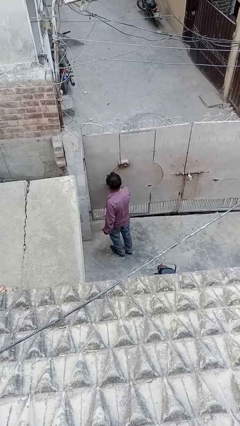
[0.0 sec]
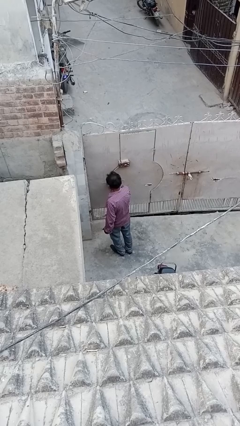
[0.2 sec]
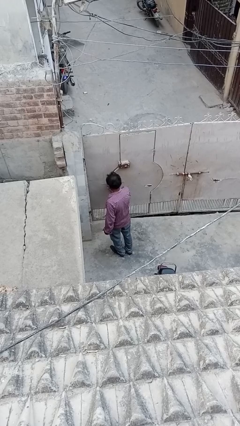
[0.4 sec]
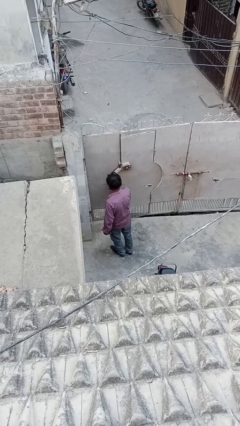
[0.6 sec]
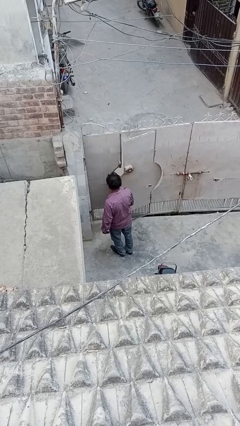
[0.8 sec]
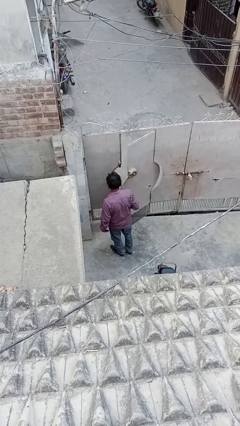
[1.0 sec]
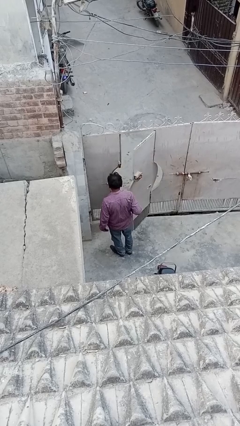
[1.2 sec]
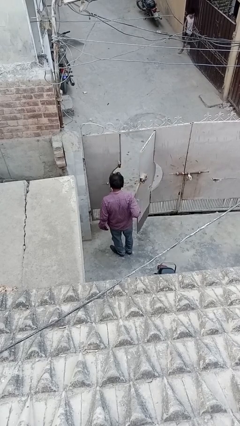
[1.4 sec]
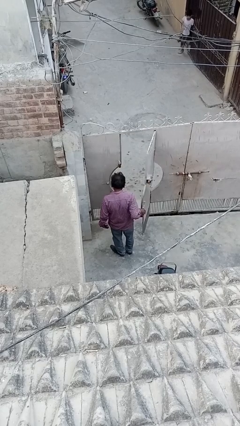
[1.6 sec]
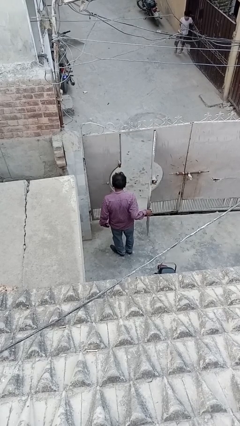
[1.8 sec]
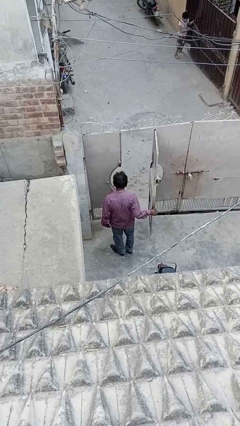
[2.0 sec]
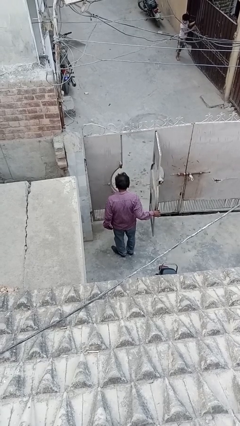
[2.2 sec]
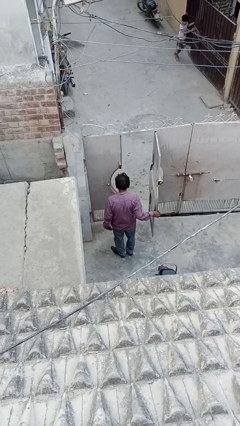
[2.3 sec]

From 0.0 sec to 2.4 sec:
person opens facility door

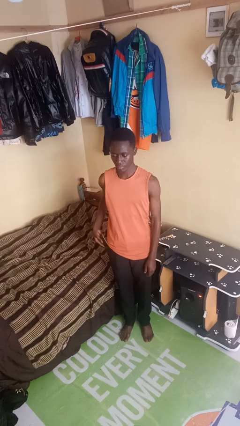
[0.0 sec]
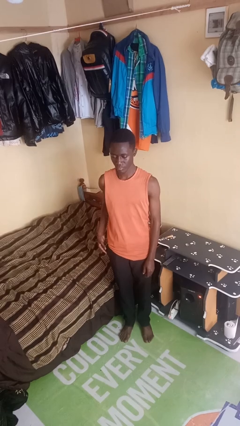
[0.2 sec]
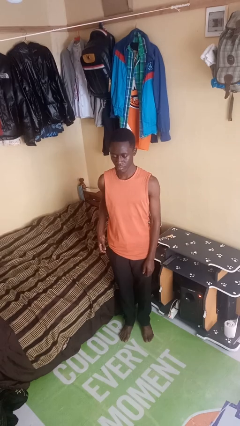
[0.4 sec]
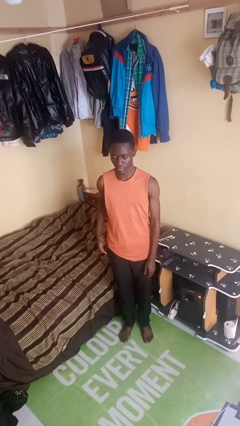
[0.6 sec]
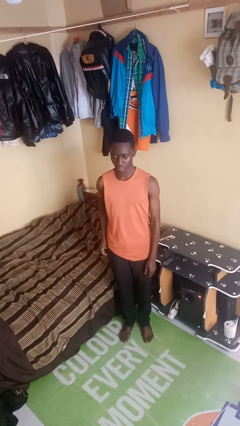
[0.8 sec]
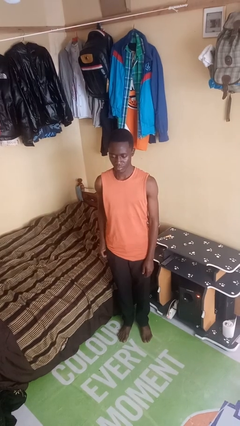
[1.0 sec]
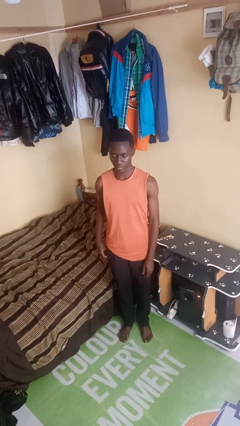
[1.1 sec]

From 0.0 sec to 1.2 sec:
person puts phone into pocket

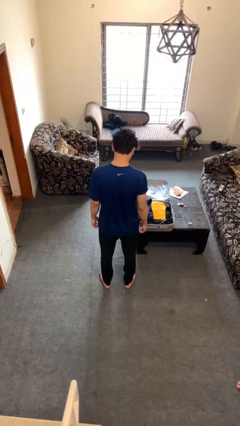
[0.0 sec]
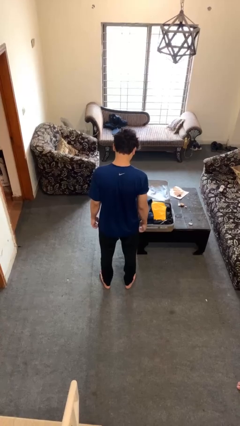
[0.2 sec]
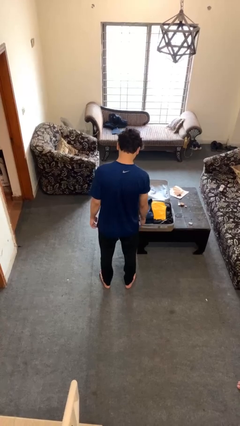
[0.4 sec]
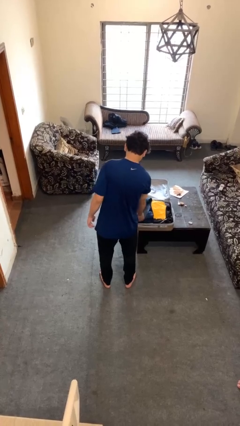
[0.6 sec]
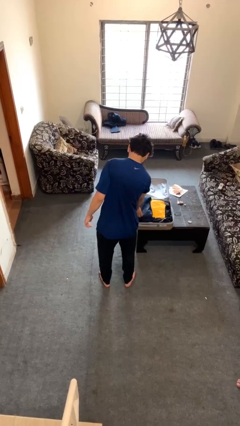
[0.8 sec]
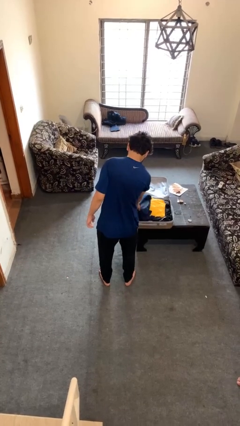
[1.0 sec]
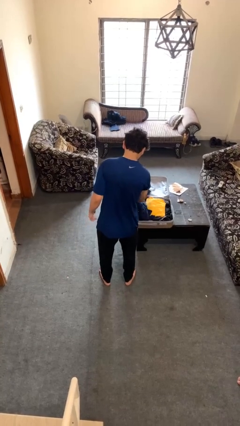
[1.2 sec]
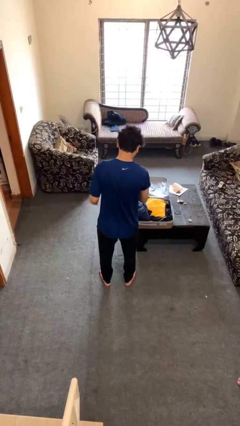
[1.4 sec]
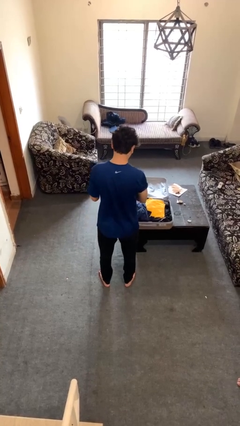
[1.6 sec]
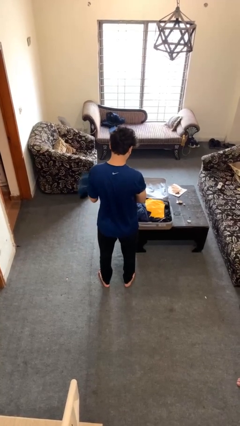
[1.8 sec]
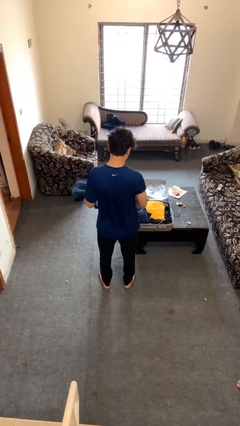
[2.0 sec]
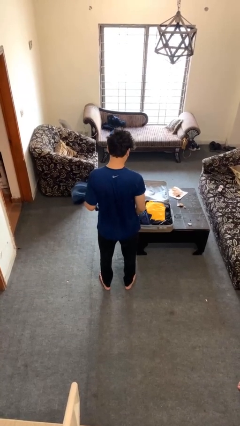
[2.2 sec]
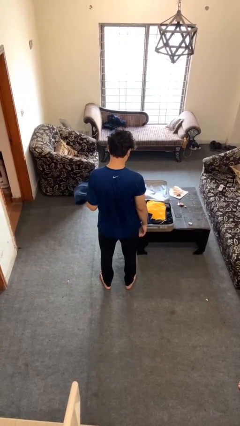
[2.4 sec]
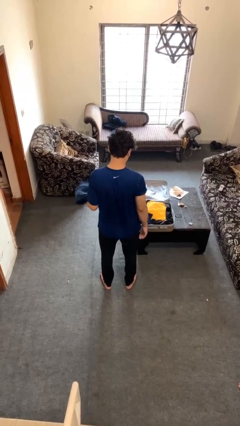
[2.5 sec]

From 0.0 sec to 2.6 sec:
person unloads clothes from suitcase

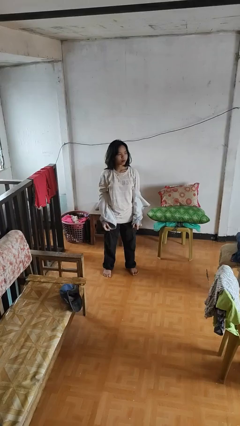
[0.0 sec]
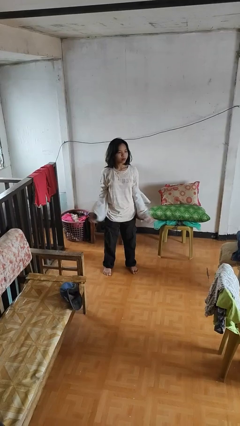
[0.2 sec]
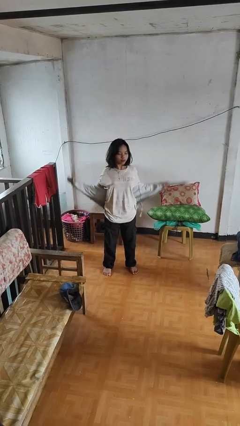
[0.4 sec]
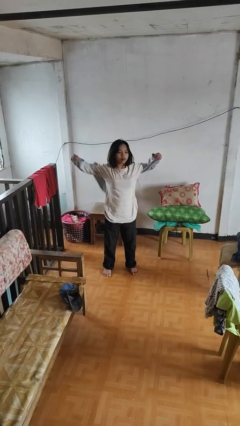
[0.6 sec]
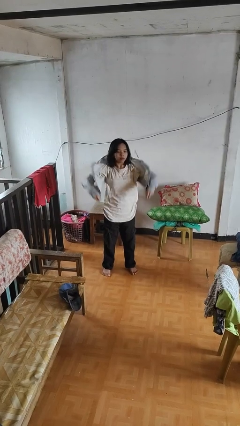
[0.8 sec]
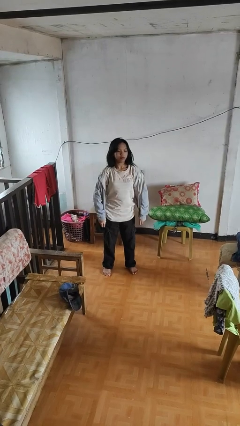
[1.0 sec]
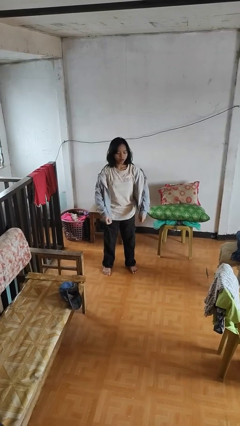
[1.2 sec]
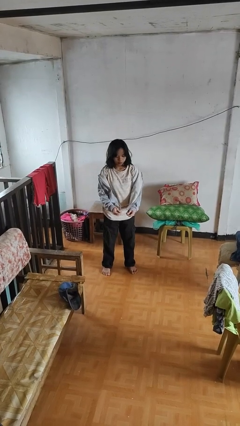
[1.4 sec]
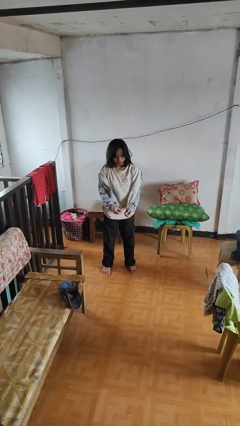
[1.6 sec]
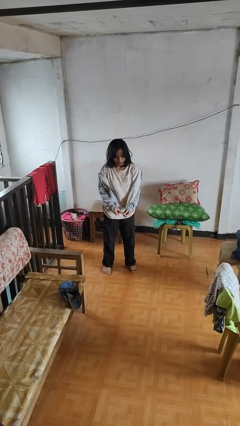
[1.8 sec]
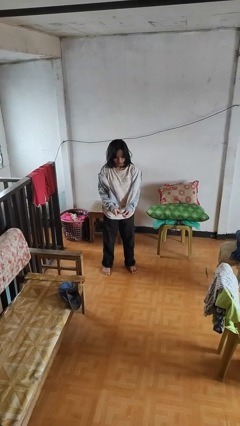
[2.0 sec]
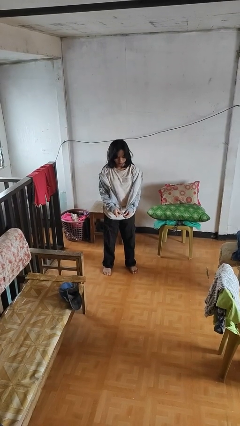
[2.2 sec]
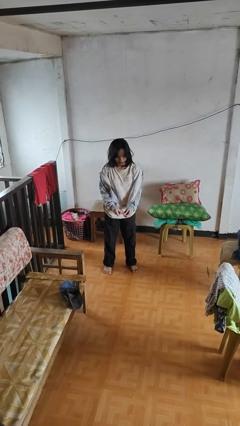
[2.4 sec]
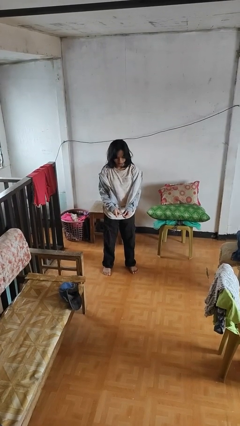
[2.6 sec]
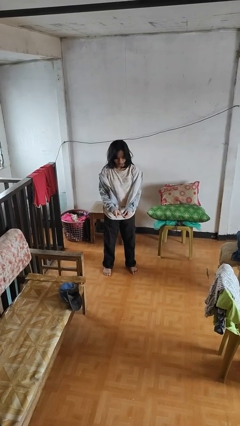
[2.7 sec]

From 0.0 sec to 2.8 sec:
person puts on jacket

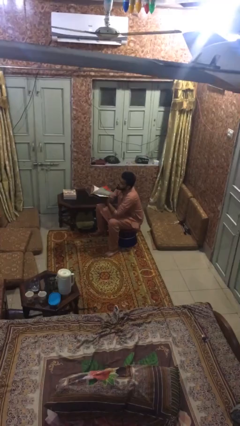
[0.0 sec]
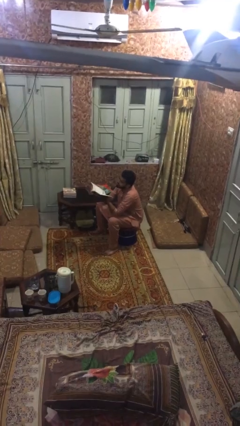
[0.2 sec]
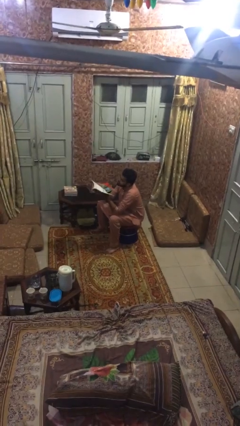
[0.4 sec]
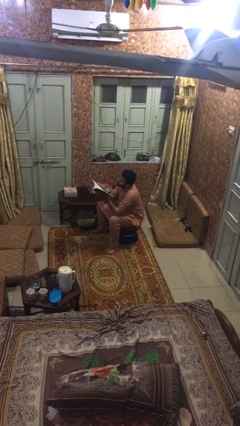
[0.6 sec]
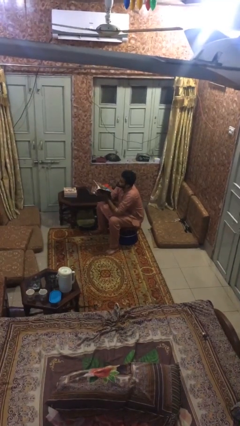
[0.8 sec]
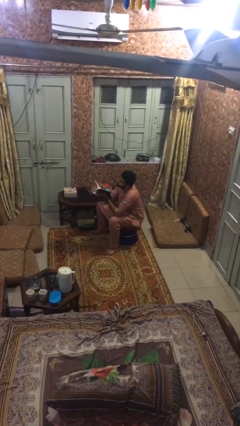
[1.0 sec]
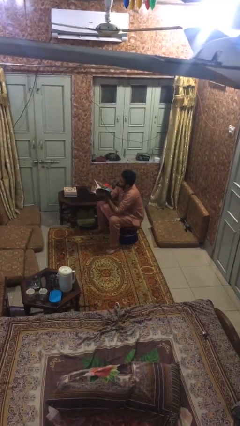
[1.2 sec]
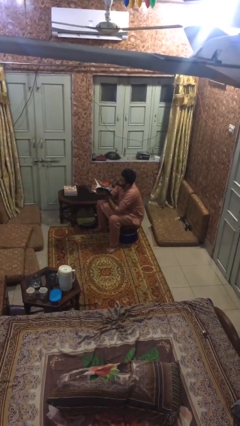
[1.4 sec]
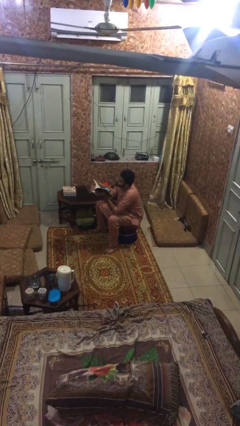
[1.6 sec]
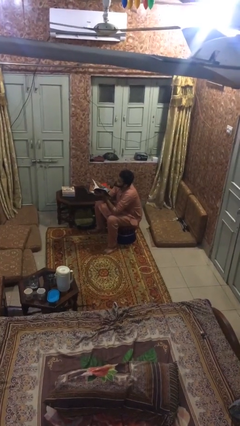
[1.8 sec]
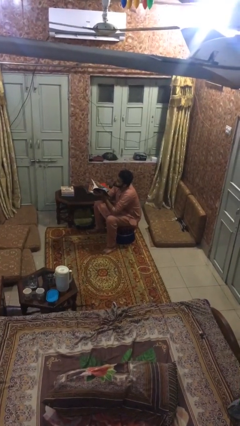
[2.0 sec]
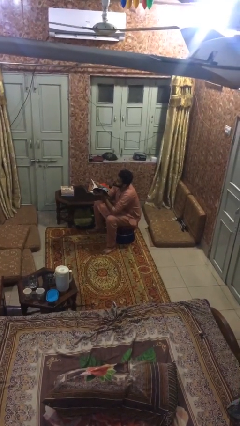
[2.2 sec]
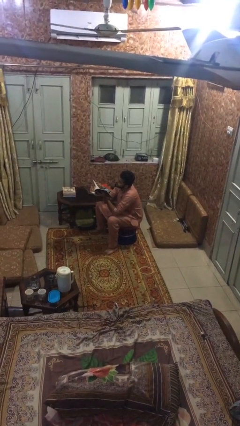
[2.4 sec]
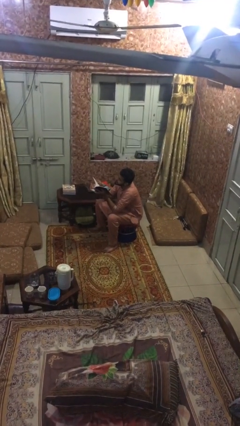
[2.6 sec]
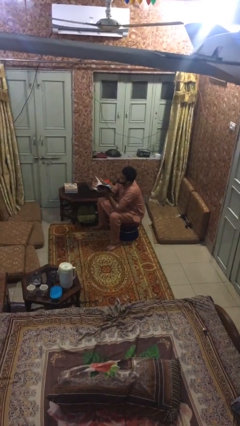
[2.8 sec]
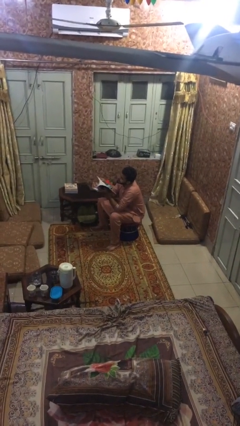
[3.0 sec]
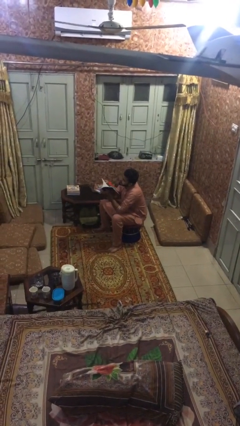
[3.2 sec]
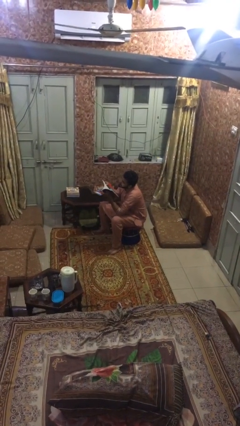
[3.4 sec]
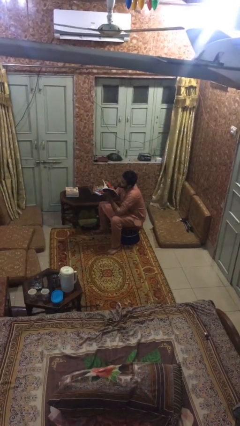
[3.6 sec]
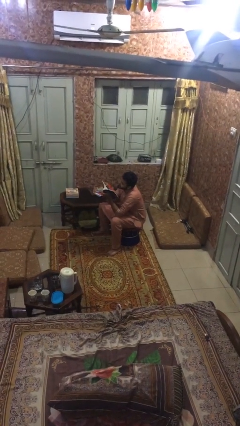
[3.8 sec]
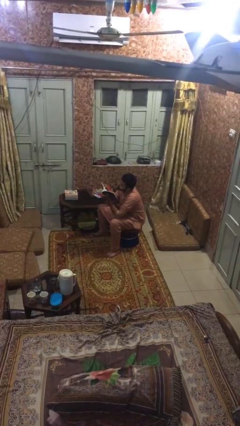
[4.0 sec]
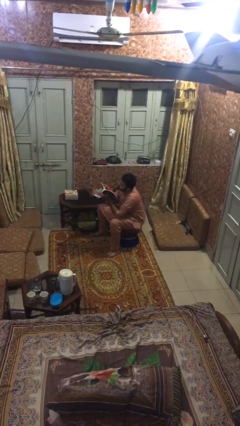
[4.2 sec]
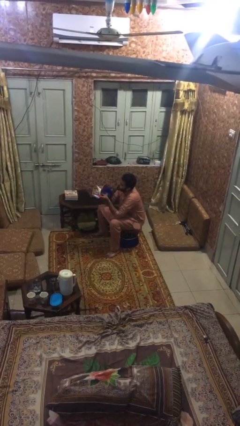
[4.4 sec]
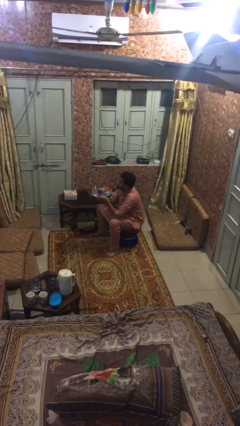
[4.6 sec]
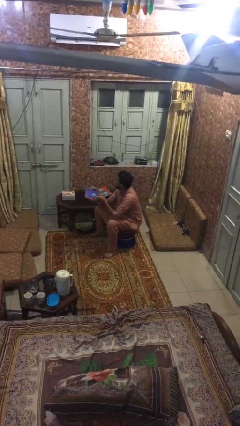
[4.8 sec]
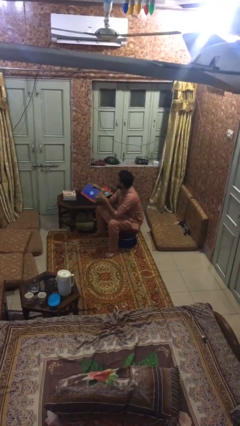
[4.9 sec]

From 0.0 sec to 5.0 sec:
person reads document

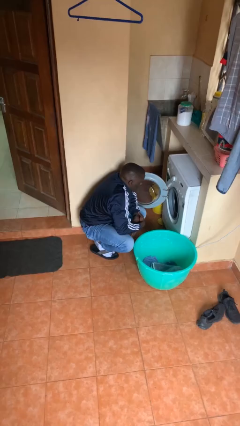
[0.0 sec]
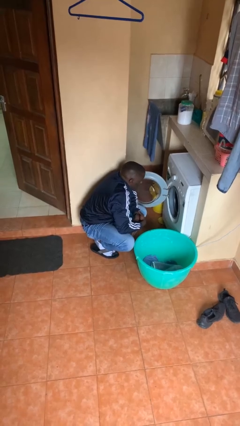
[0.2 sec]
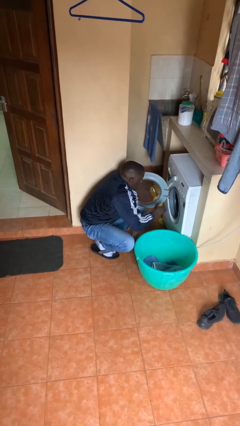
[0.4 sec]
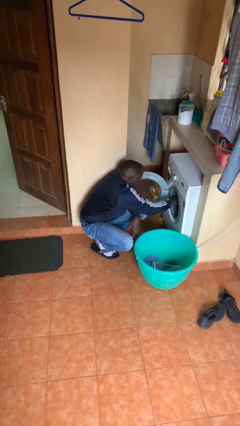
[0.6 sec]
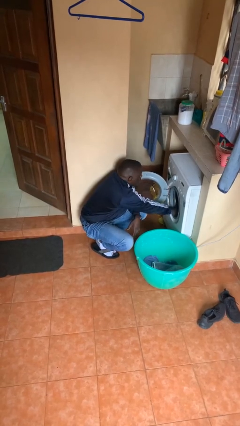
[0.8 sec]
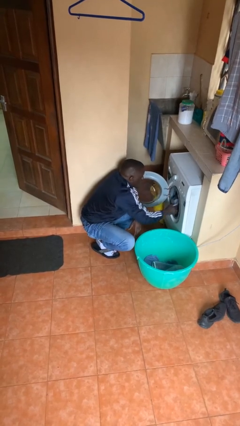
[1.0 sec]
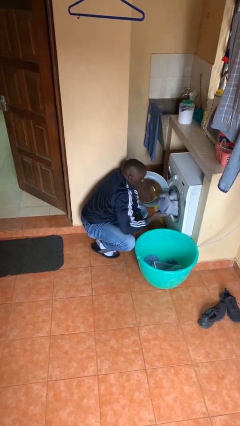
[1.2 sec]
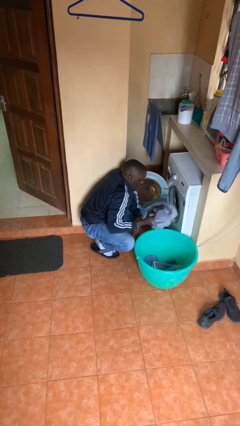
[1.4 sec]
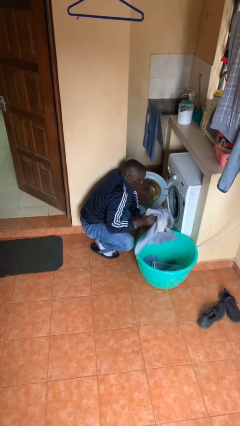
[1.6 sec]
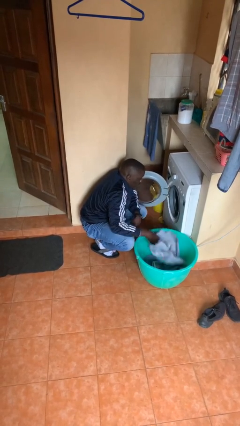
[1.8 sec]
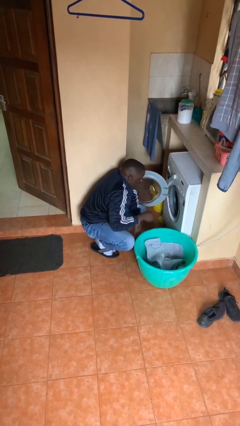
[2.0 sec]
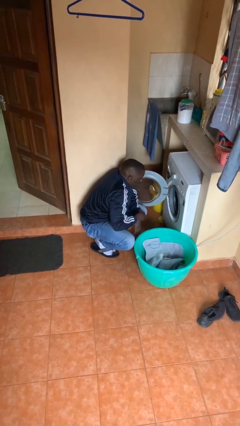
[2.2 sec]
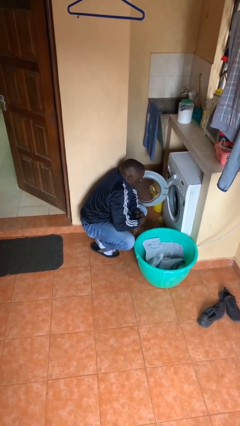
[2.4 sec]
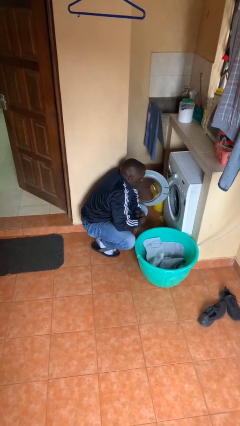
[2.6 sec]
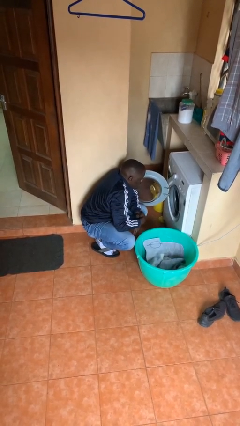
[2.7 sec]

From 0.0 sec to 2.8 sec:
person loads clotheswasher
